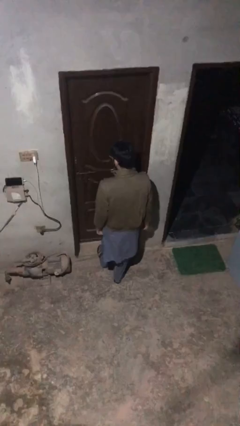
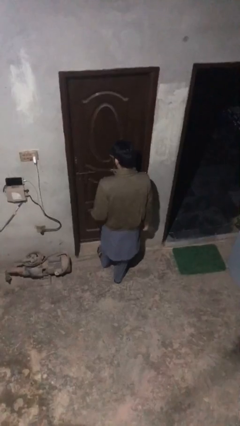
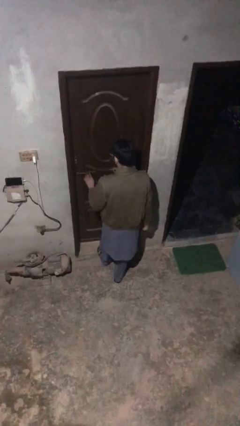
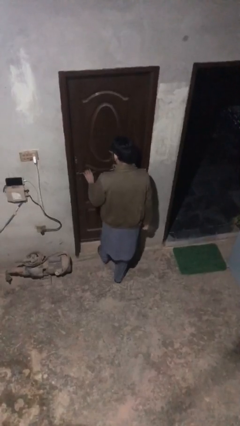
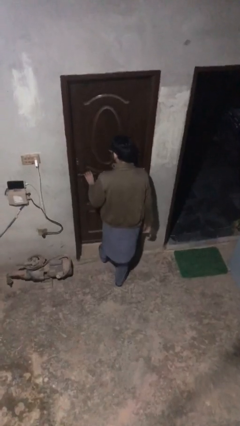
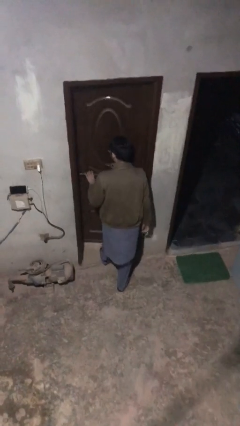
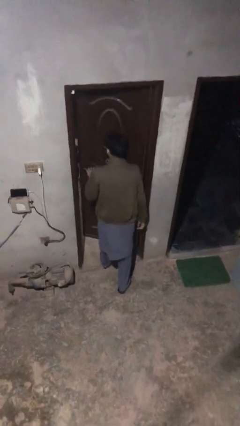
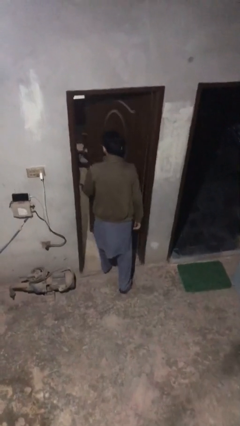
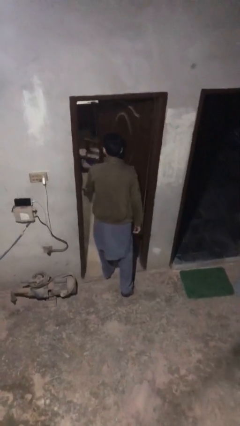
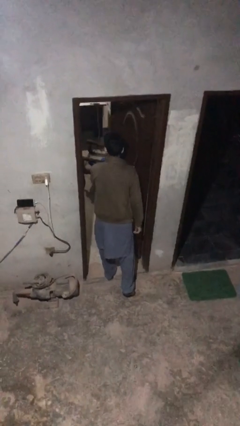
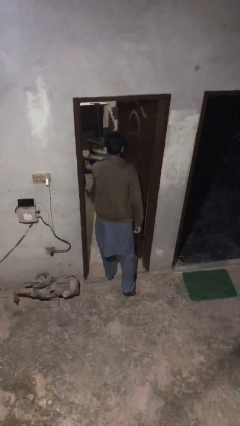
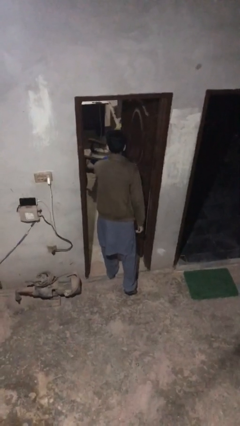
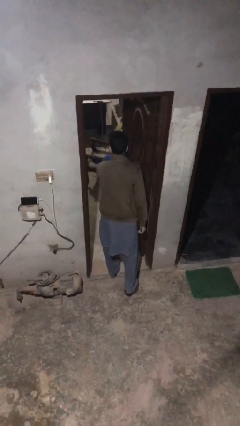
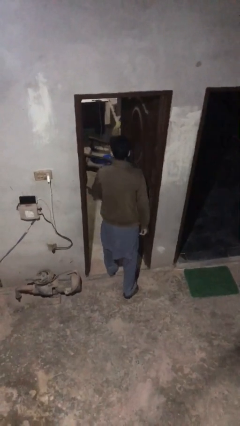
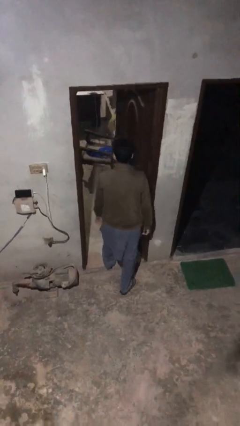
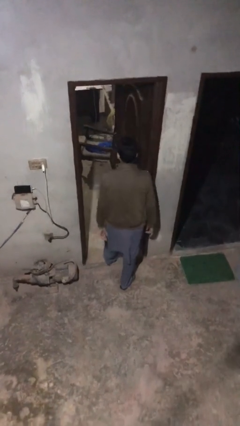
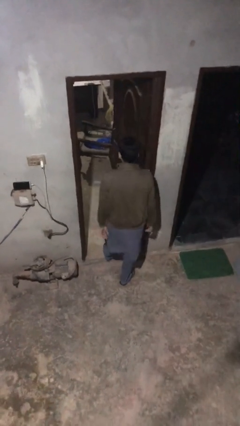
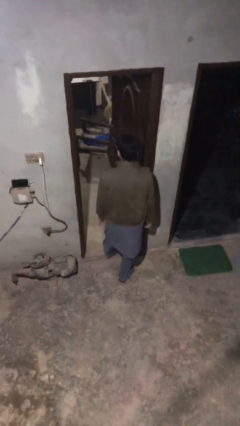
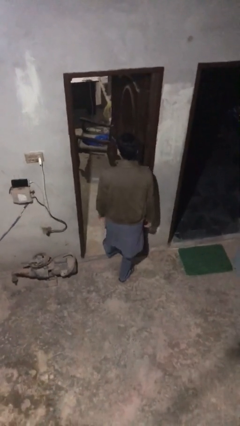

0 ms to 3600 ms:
person opens facility door

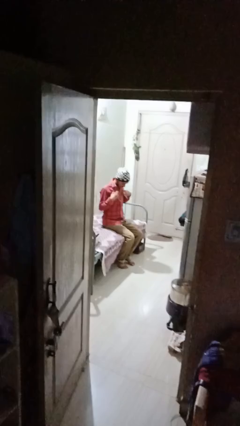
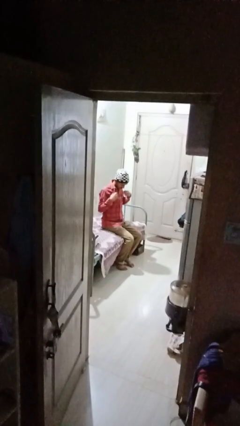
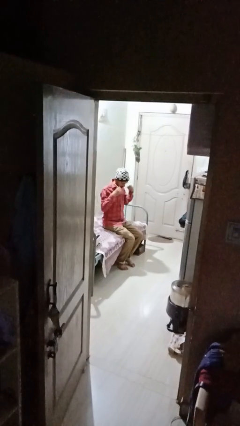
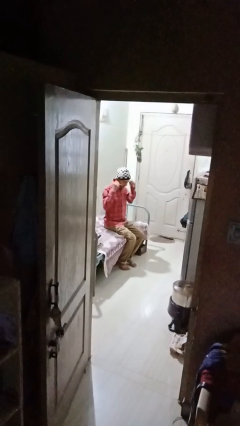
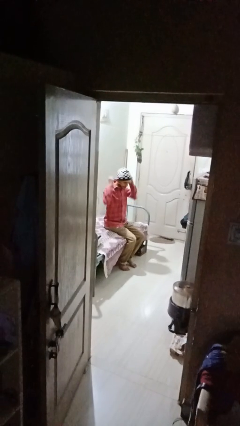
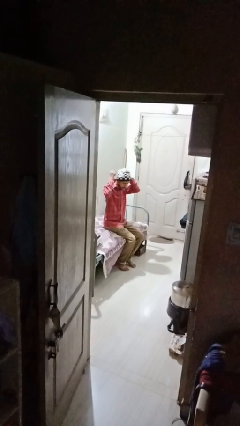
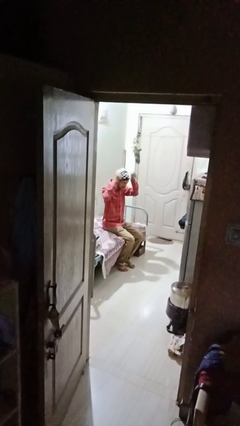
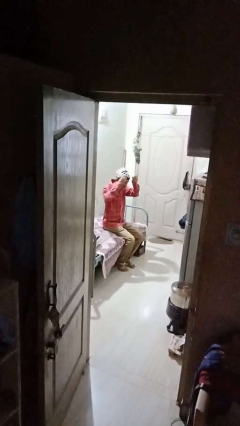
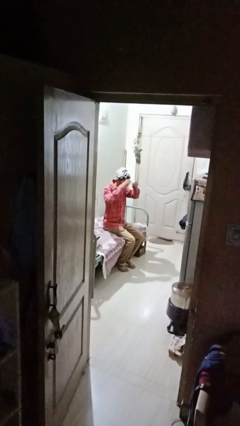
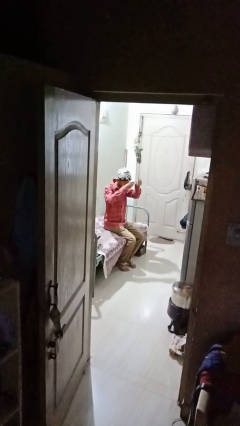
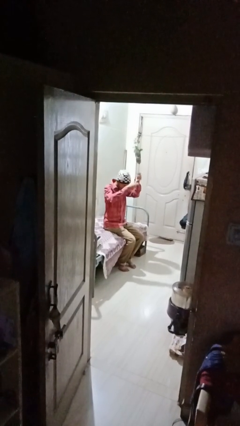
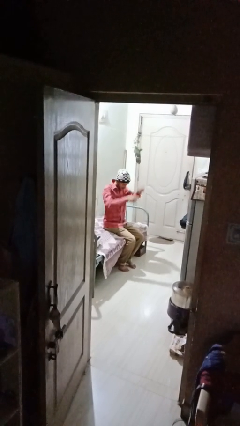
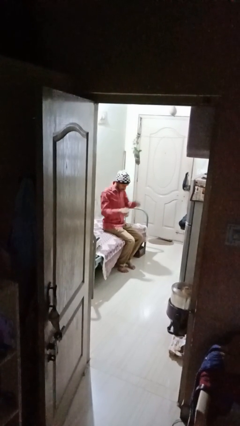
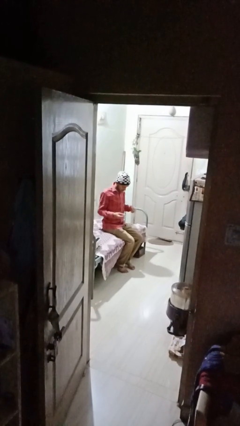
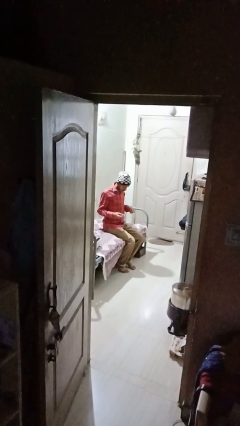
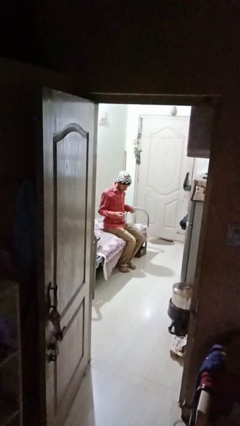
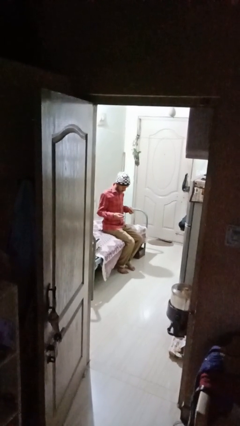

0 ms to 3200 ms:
person takes off necklace

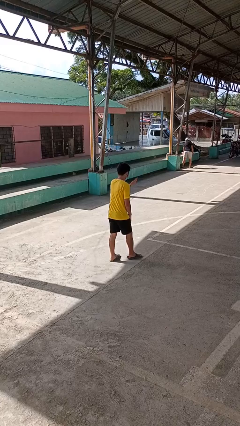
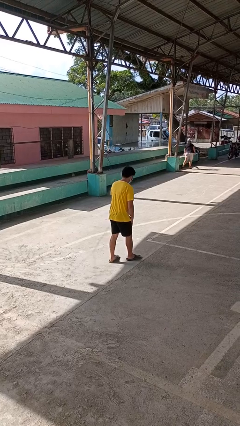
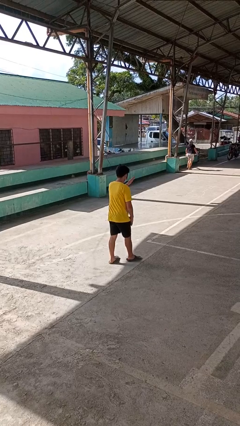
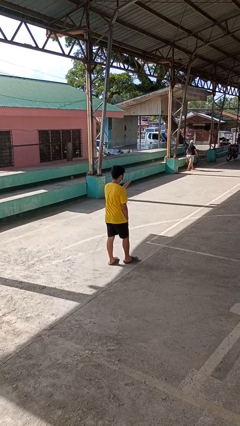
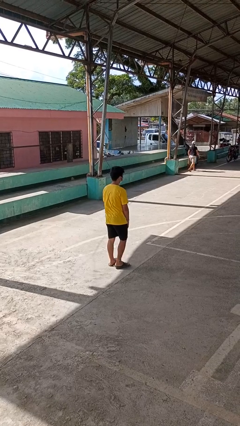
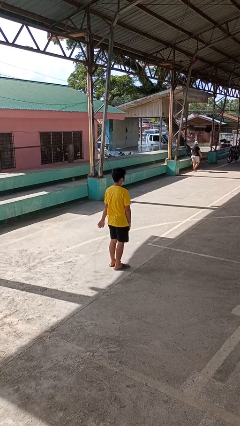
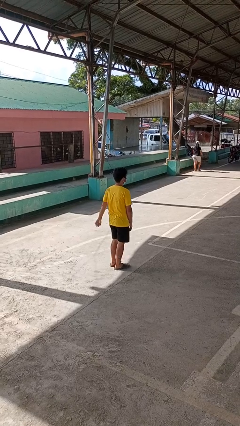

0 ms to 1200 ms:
person karate chop

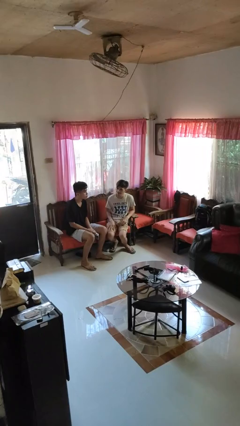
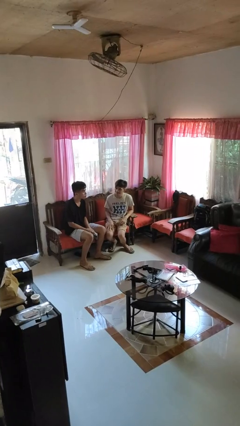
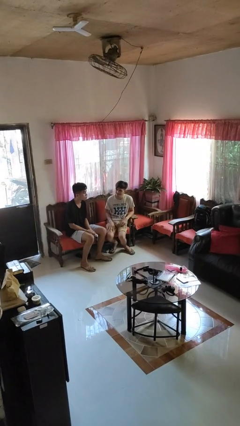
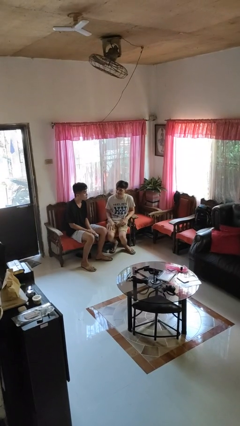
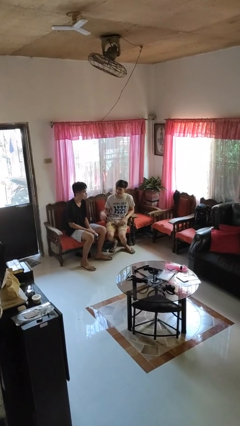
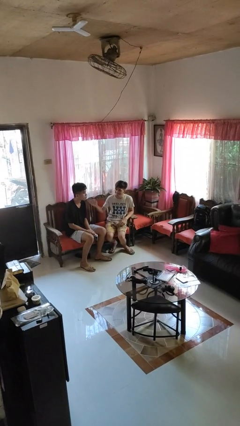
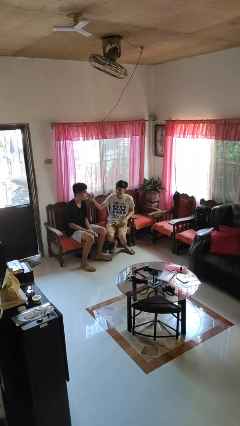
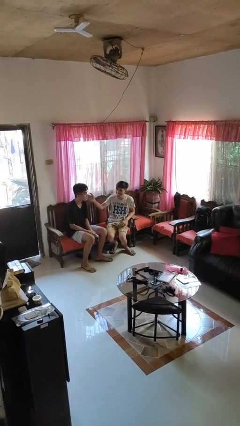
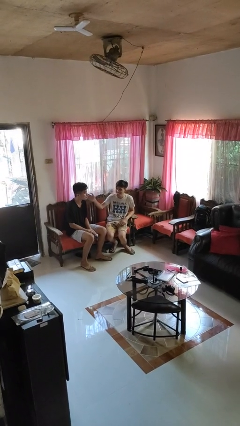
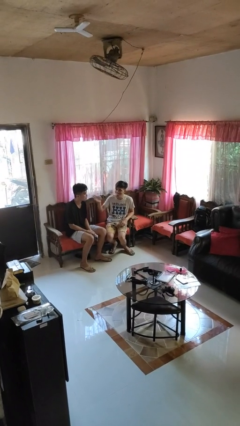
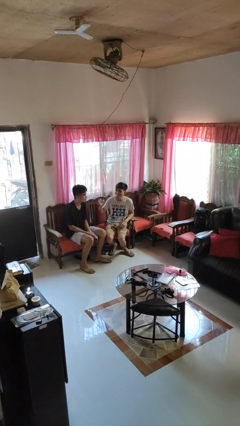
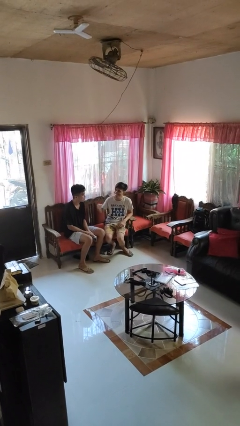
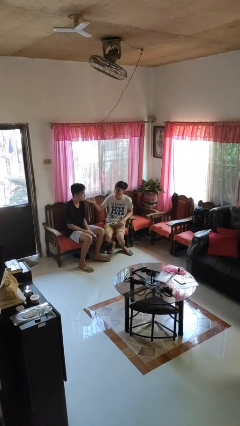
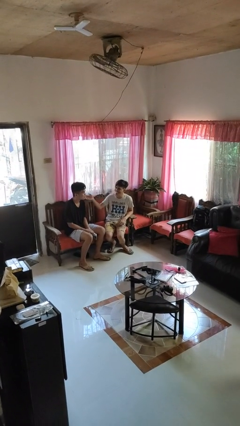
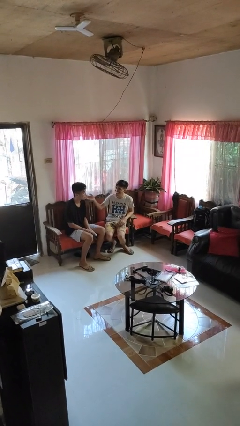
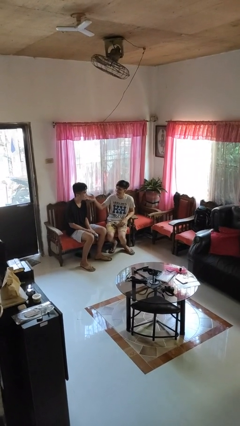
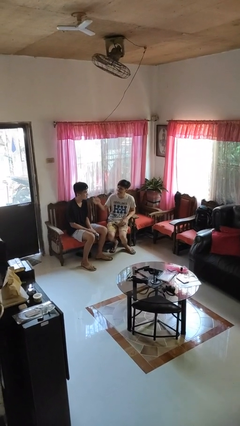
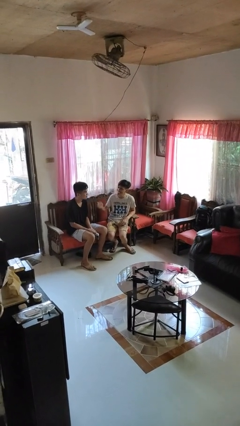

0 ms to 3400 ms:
person touches face of person

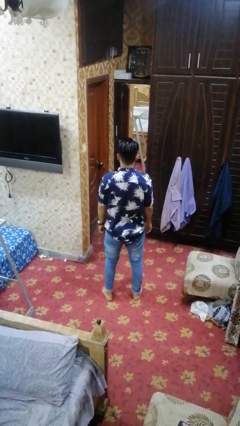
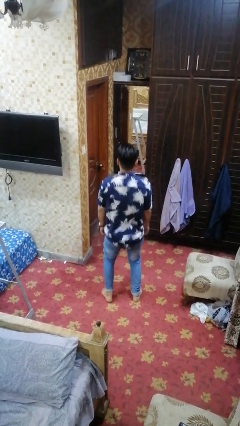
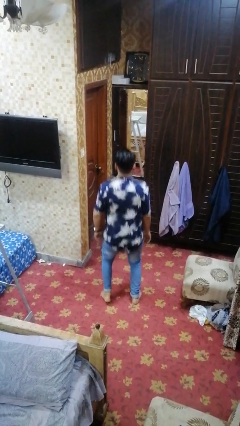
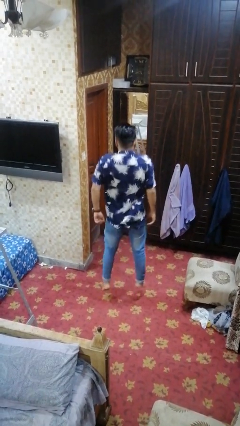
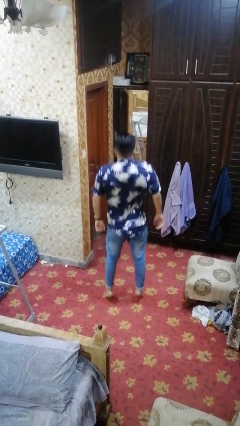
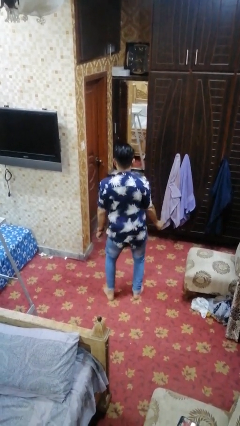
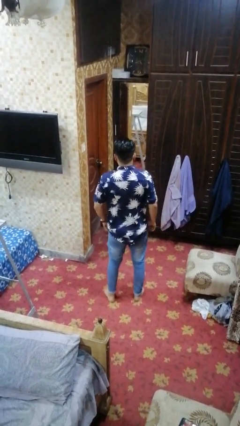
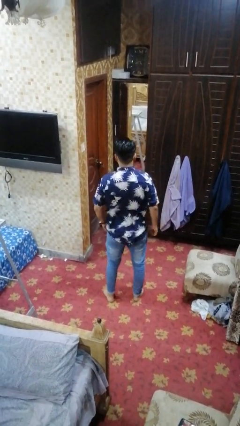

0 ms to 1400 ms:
person jumps

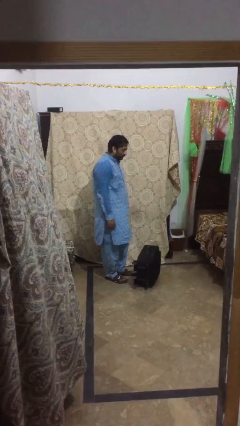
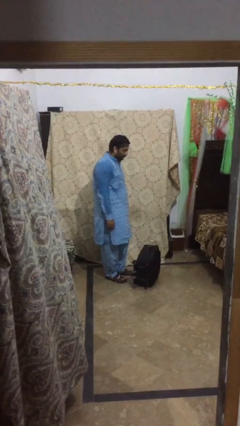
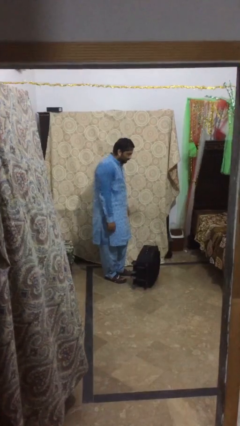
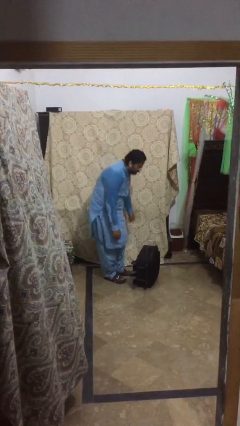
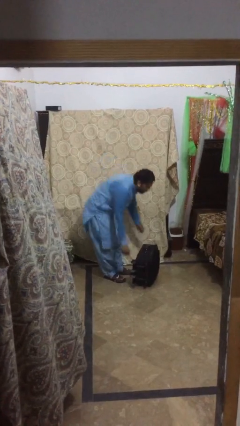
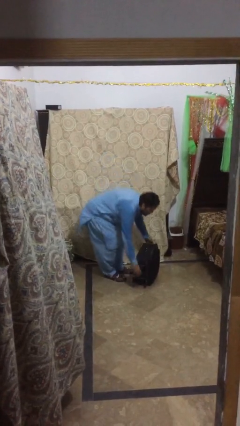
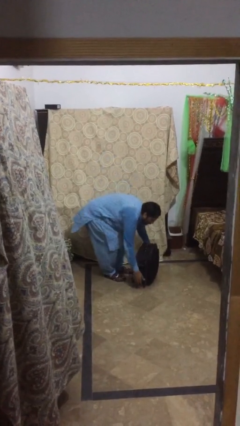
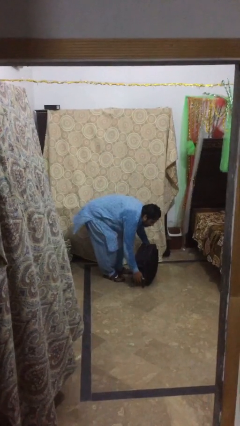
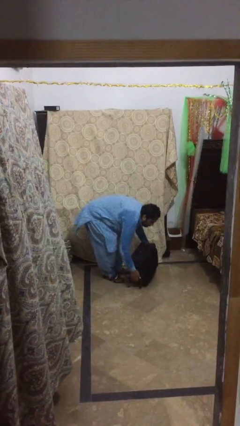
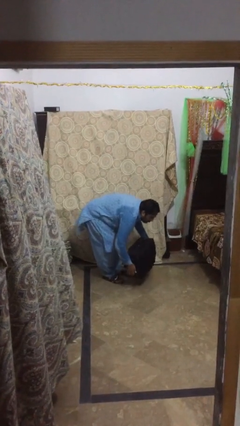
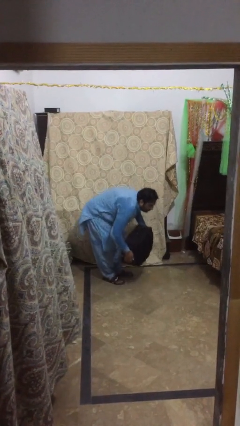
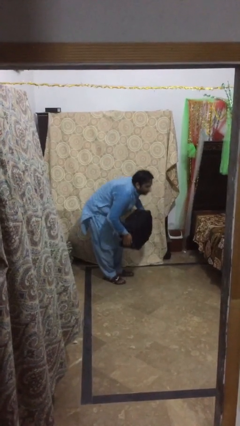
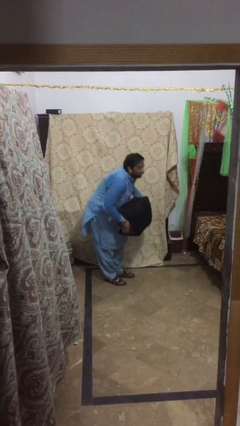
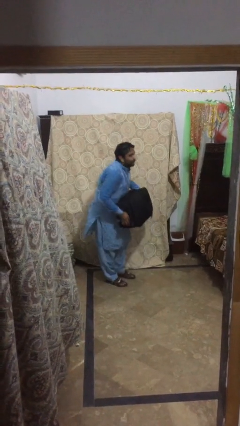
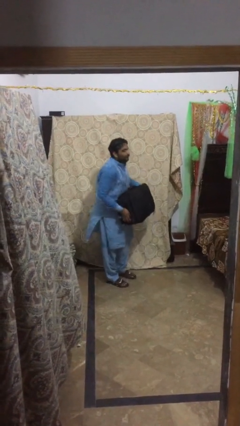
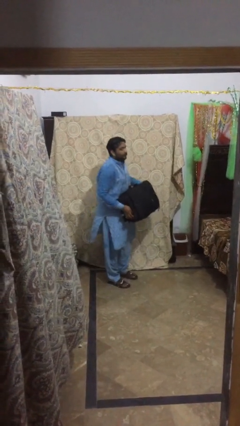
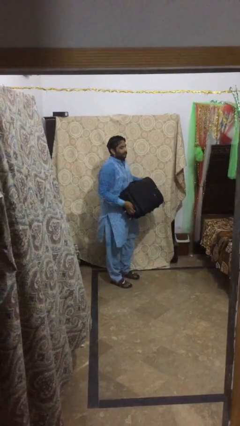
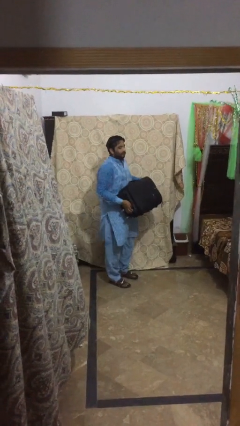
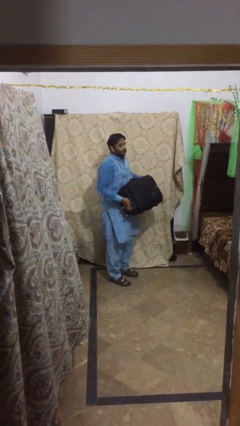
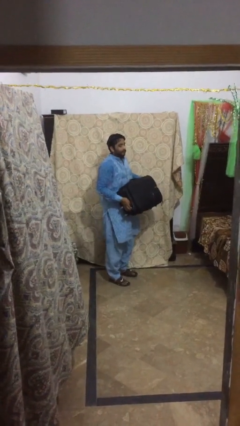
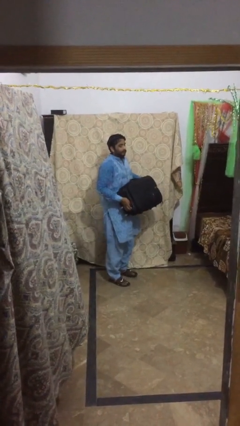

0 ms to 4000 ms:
person picks up object from floor

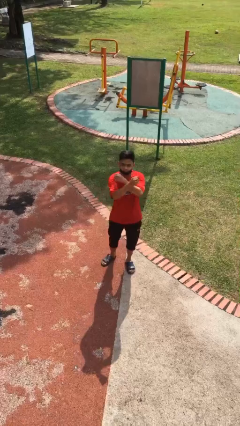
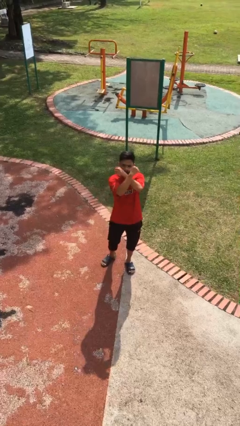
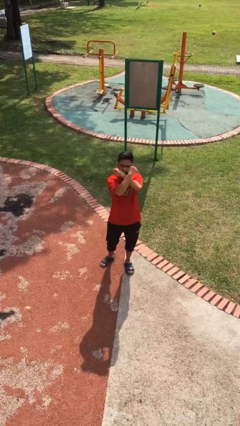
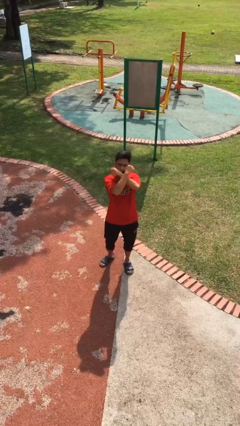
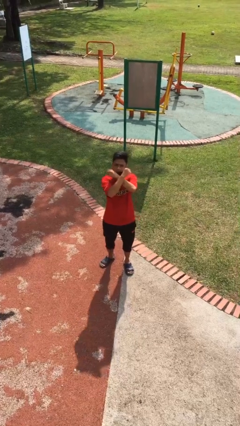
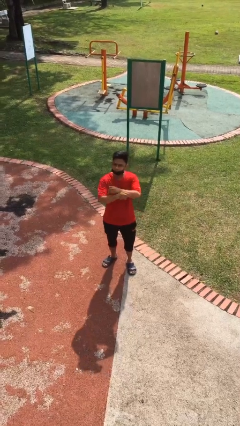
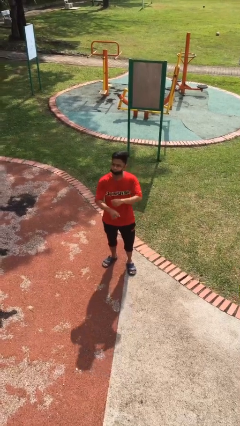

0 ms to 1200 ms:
person gestures arms x
